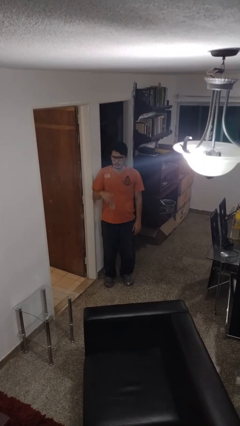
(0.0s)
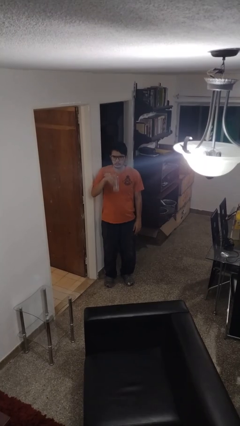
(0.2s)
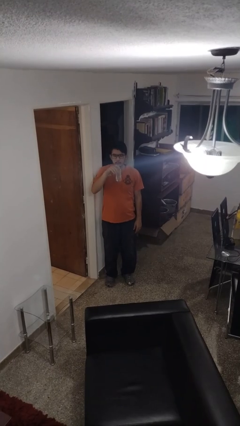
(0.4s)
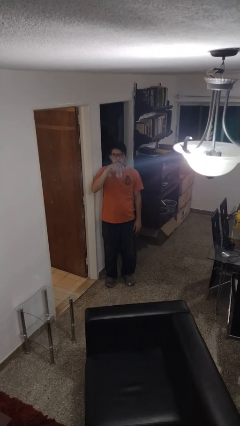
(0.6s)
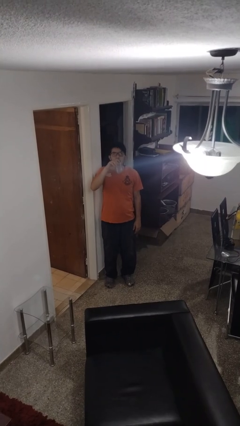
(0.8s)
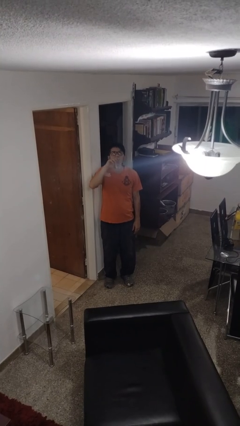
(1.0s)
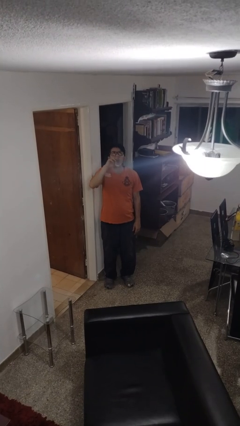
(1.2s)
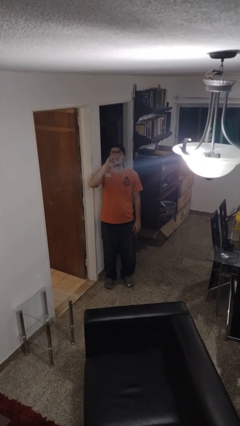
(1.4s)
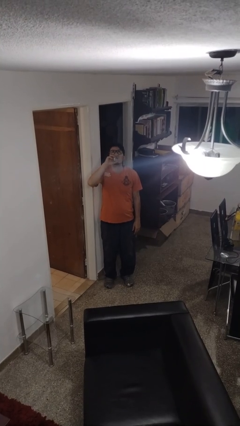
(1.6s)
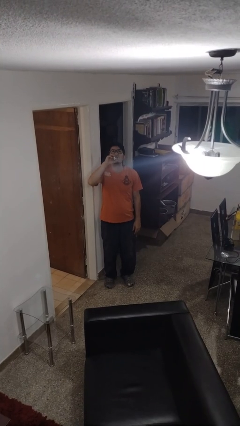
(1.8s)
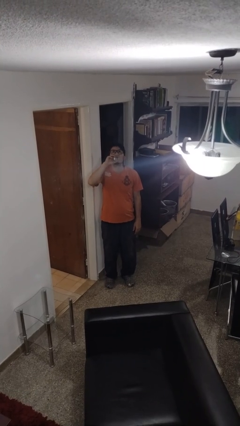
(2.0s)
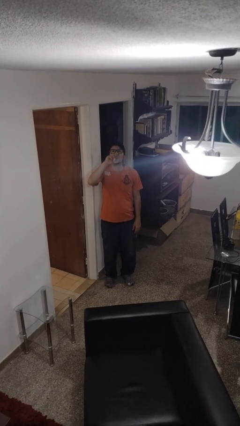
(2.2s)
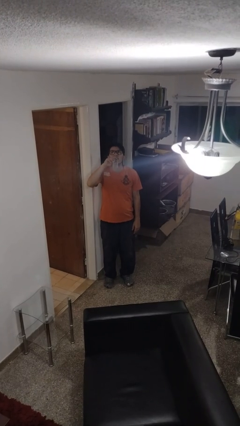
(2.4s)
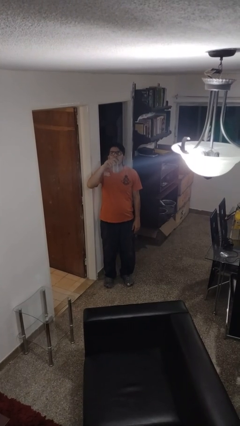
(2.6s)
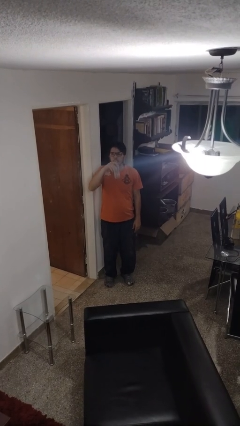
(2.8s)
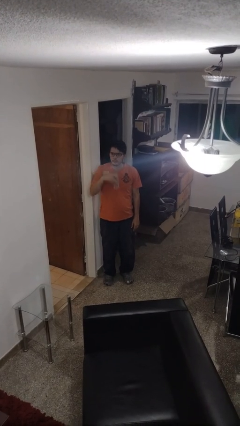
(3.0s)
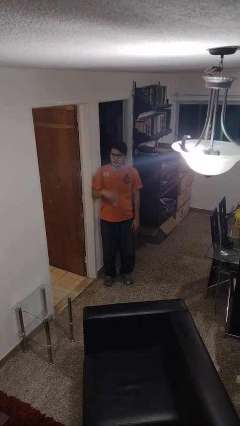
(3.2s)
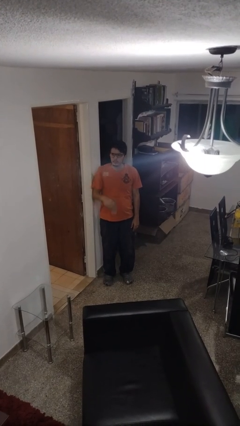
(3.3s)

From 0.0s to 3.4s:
person drinks from bottle

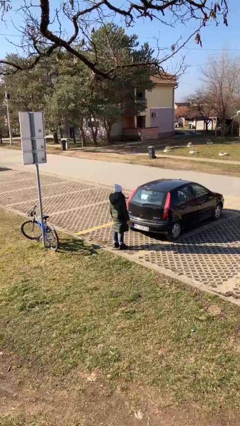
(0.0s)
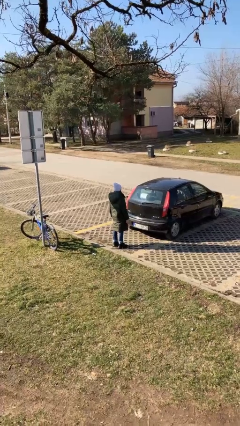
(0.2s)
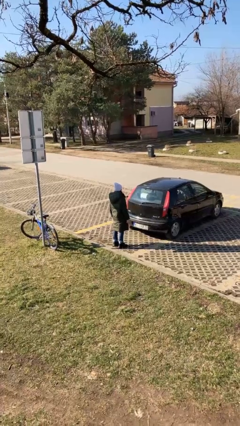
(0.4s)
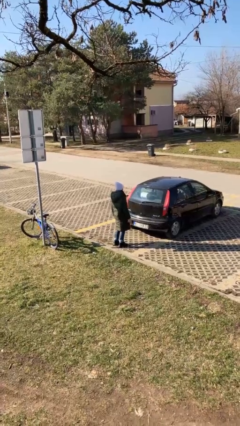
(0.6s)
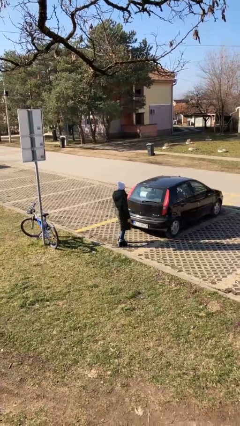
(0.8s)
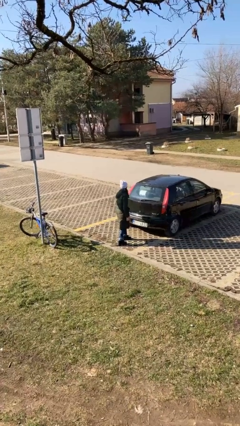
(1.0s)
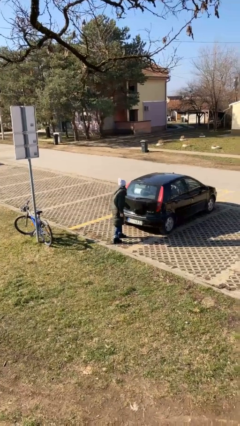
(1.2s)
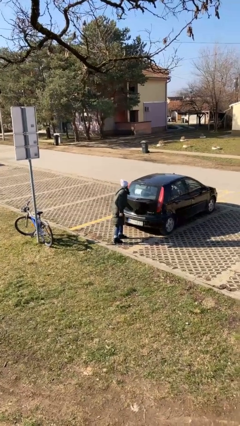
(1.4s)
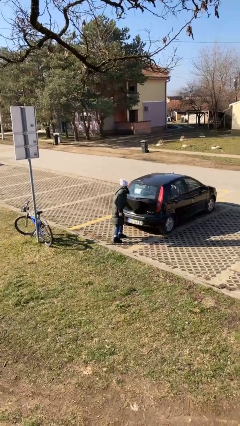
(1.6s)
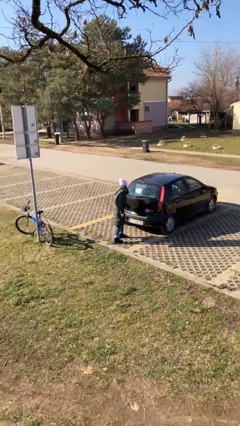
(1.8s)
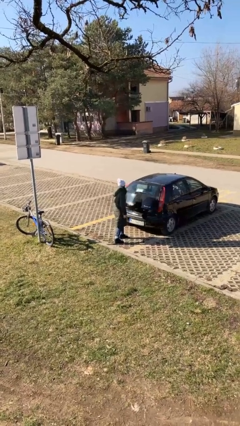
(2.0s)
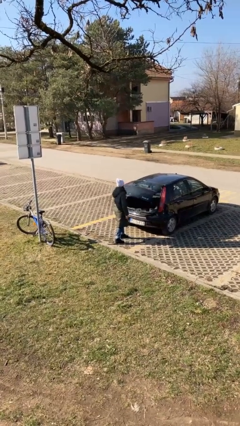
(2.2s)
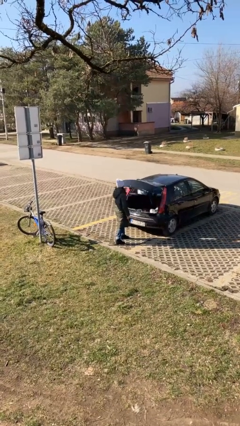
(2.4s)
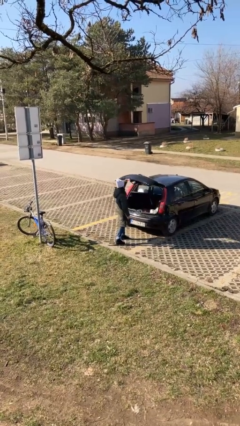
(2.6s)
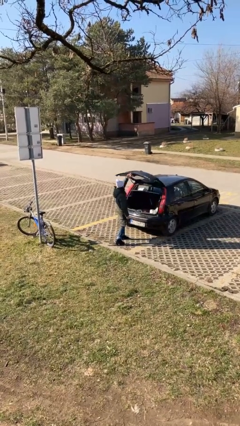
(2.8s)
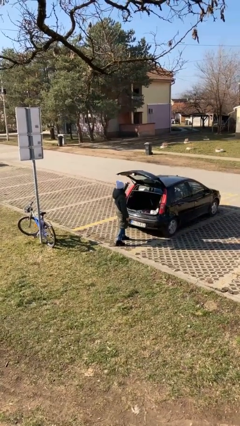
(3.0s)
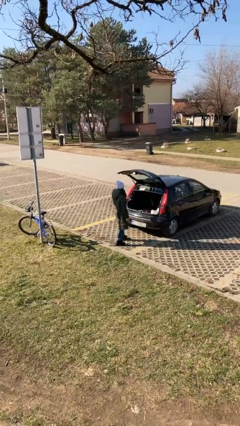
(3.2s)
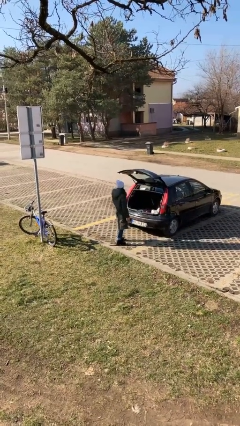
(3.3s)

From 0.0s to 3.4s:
person opens car trunk

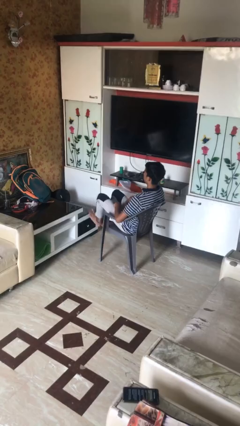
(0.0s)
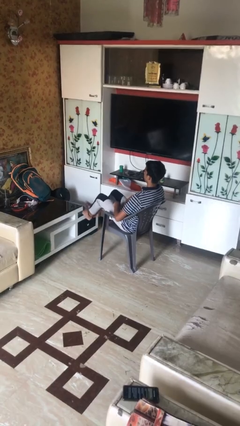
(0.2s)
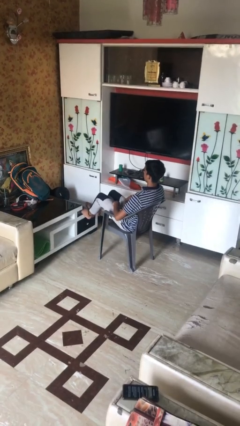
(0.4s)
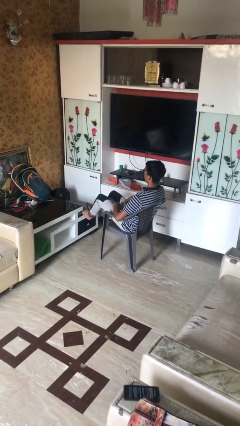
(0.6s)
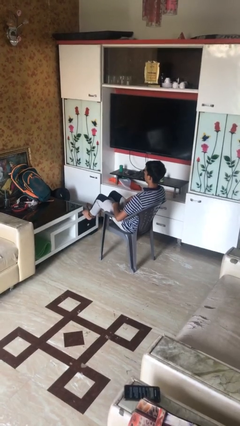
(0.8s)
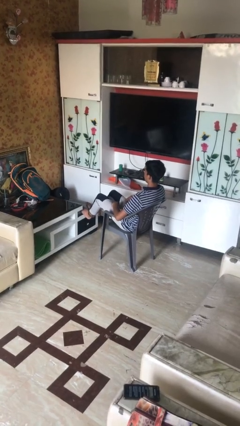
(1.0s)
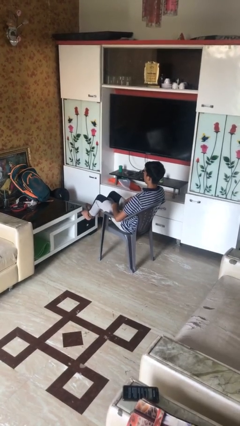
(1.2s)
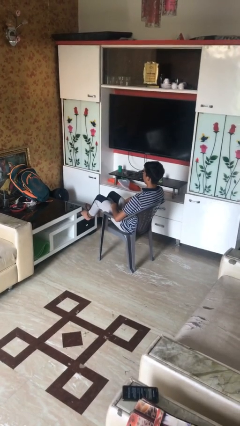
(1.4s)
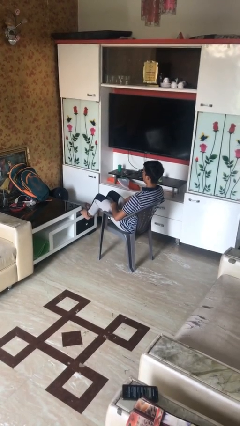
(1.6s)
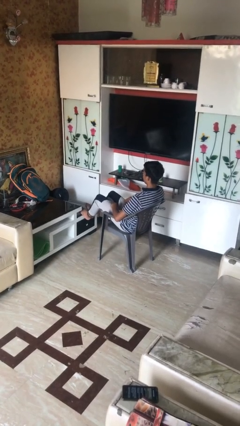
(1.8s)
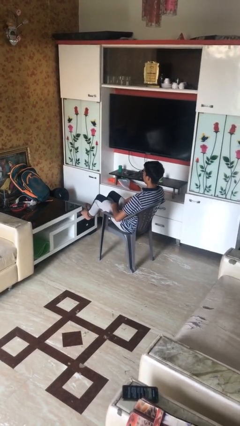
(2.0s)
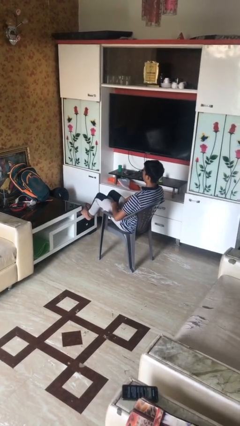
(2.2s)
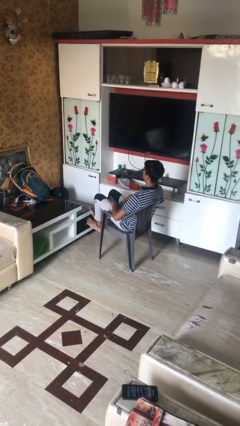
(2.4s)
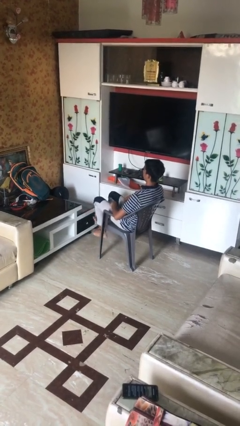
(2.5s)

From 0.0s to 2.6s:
person puts feet up

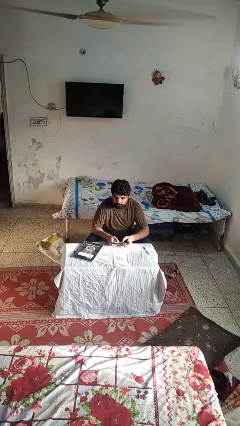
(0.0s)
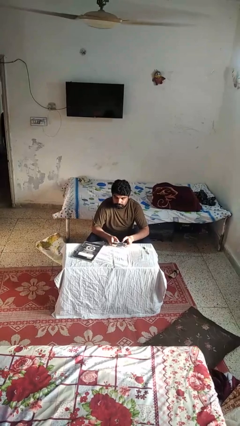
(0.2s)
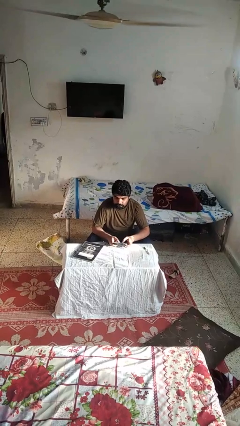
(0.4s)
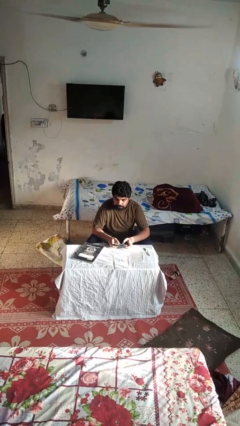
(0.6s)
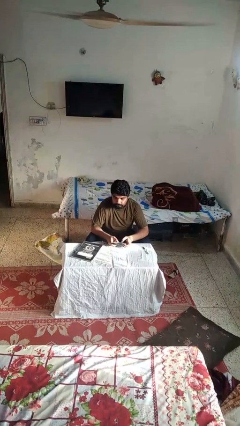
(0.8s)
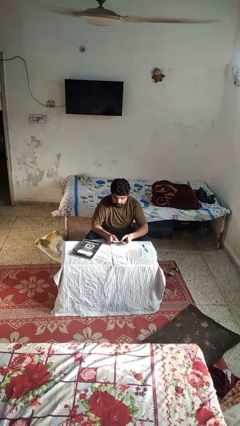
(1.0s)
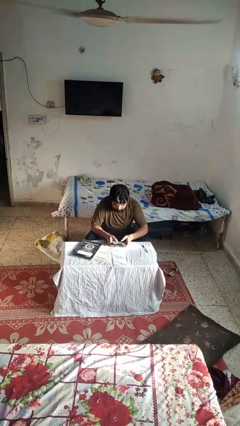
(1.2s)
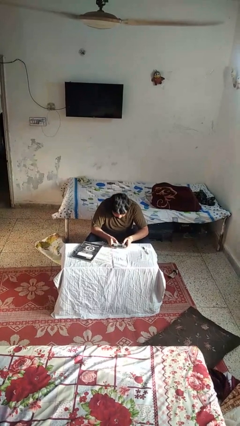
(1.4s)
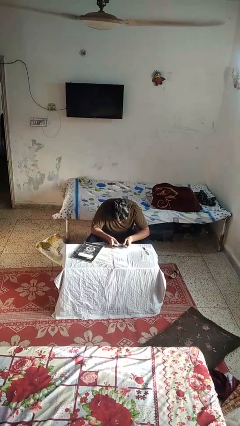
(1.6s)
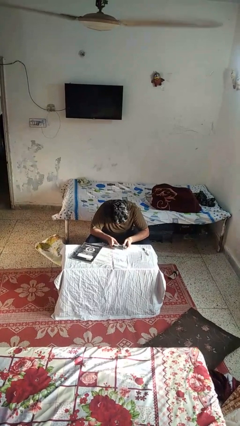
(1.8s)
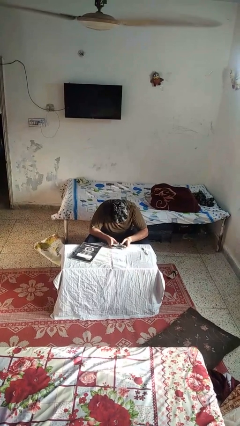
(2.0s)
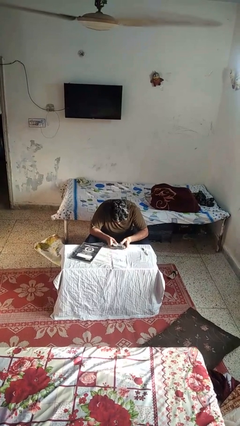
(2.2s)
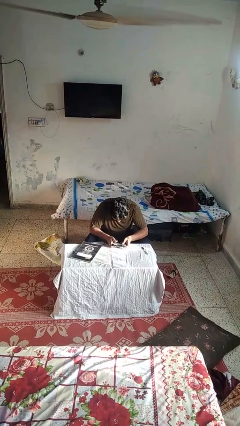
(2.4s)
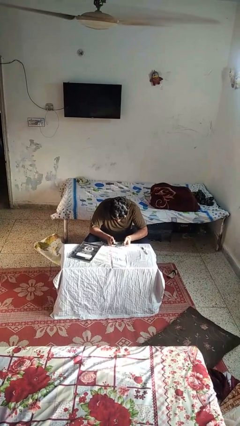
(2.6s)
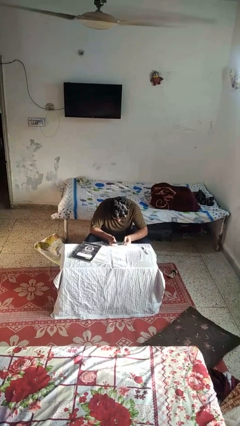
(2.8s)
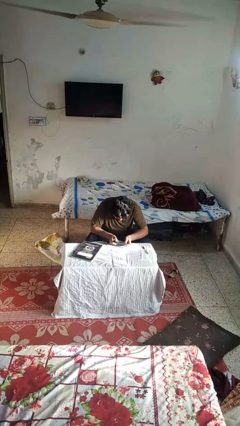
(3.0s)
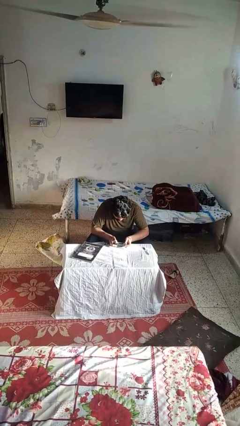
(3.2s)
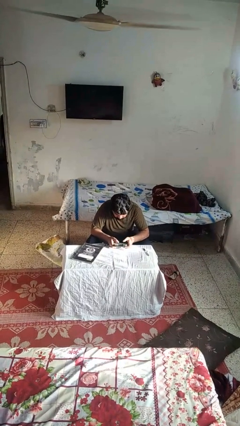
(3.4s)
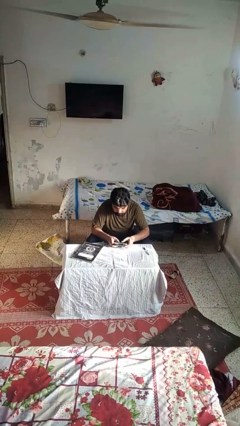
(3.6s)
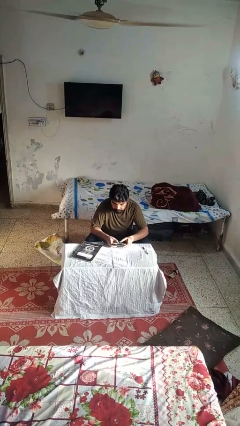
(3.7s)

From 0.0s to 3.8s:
person interacts with handheld game

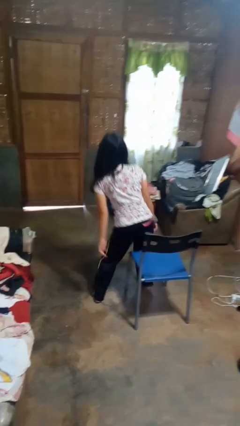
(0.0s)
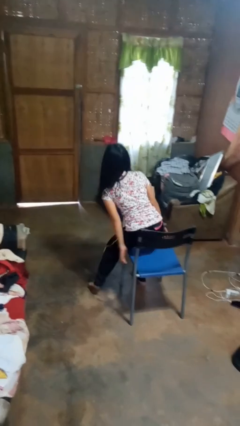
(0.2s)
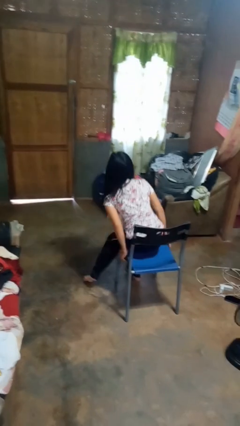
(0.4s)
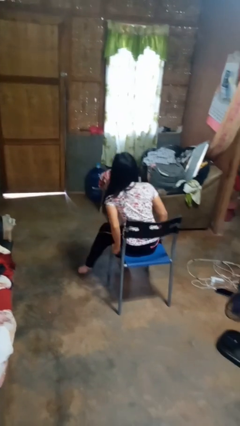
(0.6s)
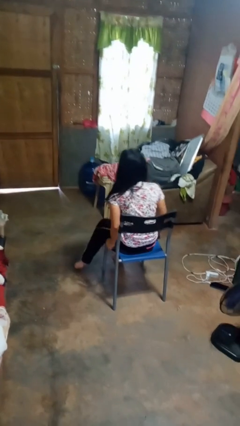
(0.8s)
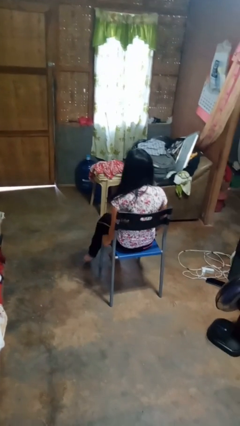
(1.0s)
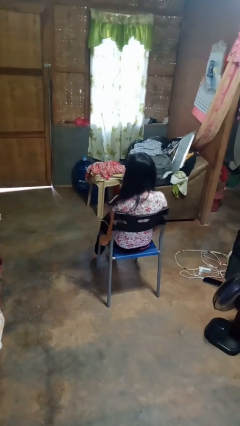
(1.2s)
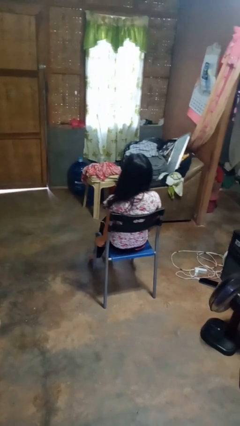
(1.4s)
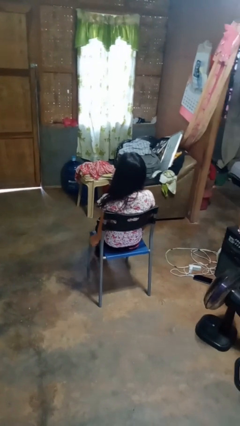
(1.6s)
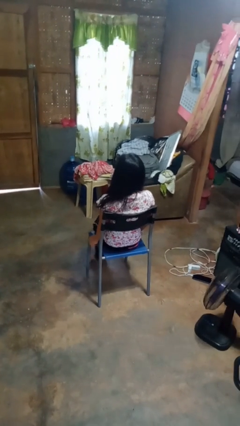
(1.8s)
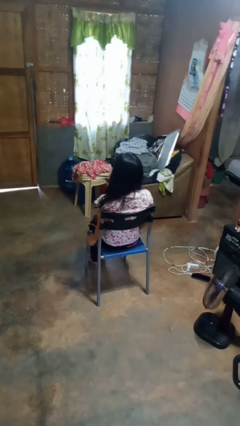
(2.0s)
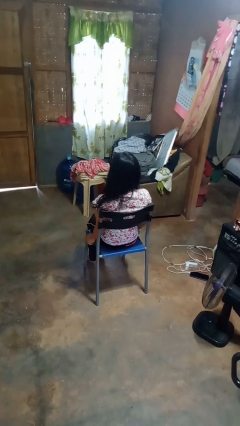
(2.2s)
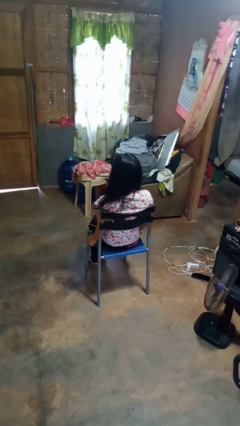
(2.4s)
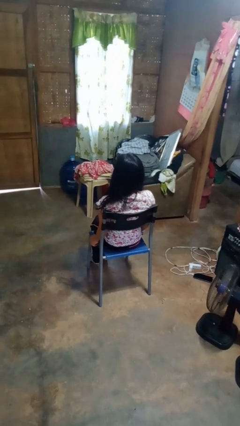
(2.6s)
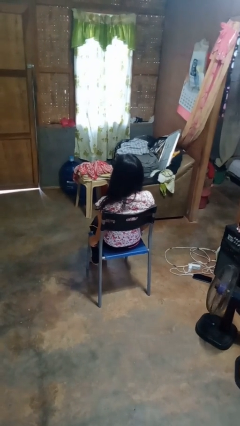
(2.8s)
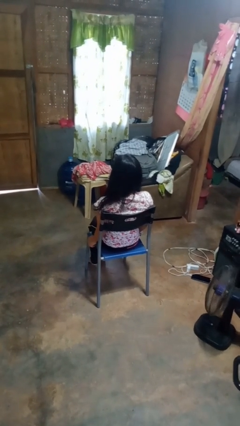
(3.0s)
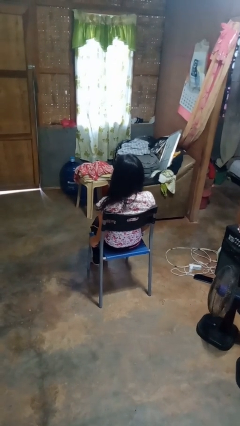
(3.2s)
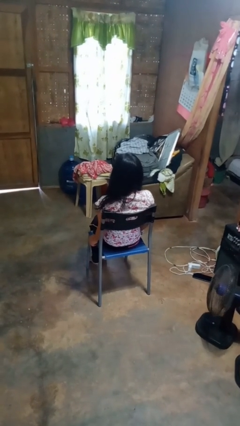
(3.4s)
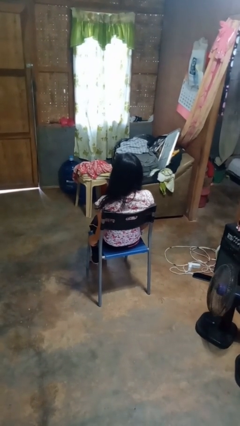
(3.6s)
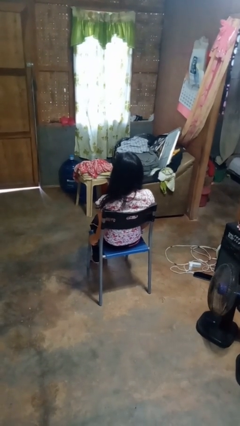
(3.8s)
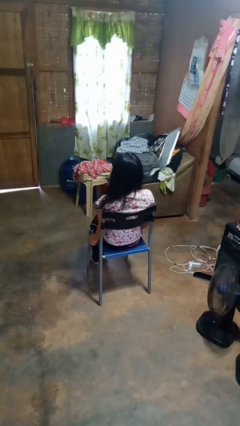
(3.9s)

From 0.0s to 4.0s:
person sits down

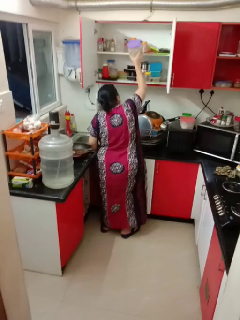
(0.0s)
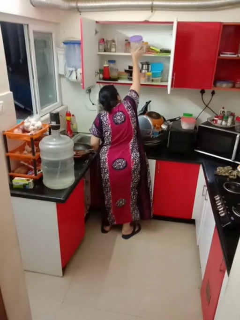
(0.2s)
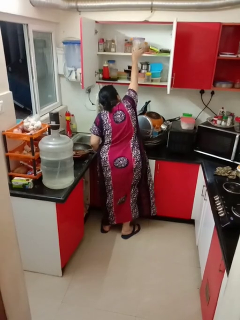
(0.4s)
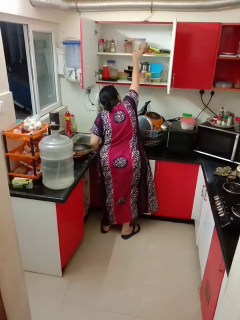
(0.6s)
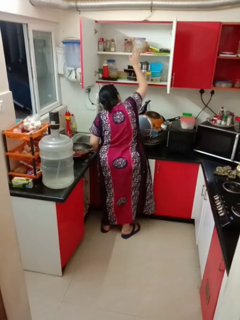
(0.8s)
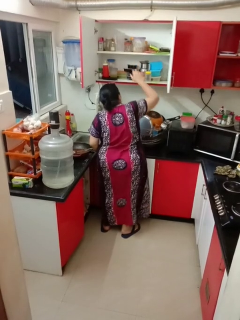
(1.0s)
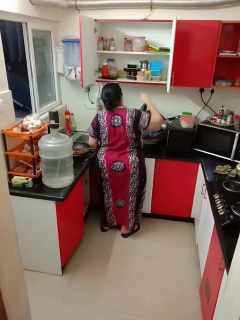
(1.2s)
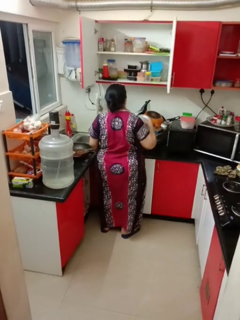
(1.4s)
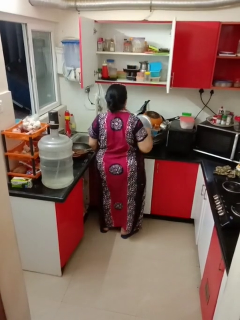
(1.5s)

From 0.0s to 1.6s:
person puts object in cabinet
